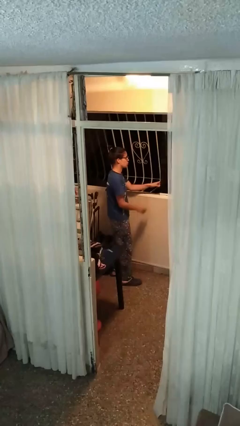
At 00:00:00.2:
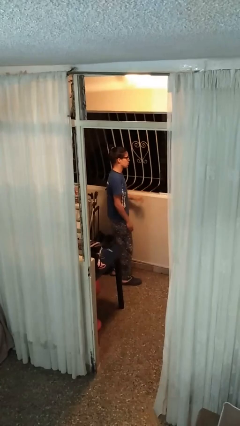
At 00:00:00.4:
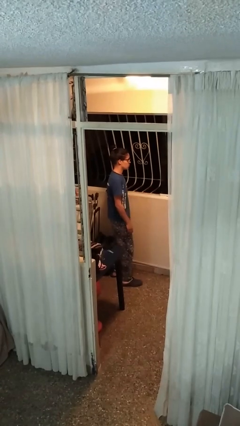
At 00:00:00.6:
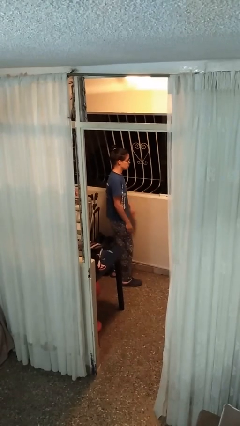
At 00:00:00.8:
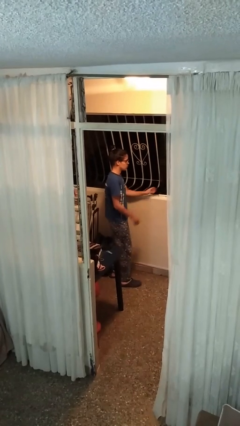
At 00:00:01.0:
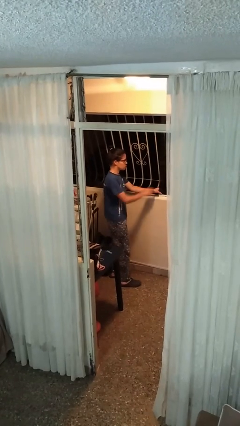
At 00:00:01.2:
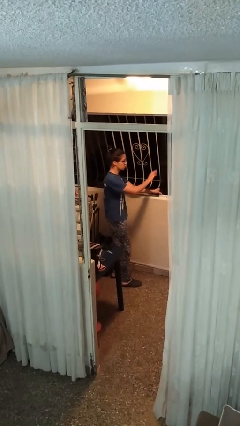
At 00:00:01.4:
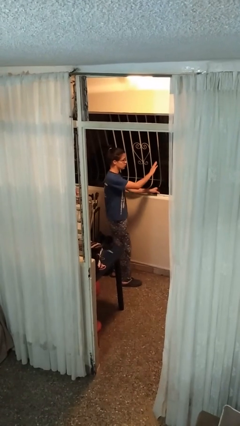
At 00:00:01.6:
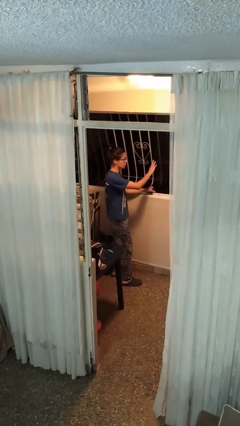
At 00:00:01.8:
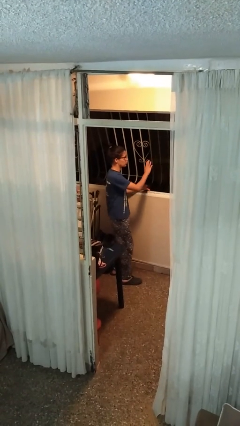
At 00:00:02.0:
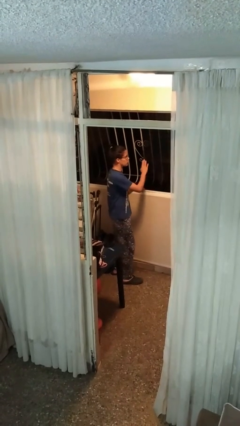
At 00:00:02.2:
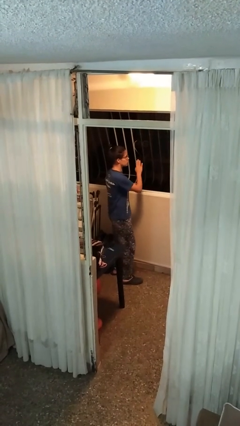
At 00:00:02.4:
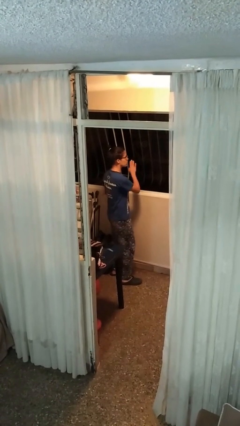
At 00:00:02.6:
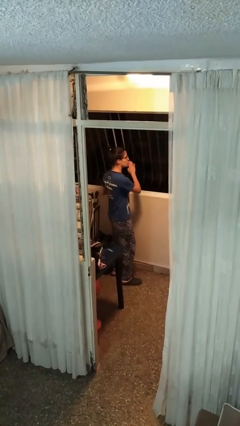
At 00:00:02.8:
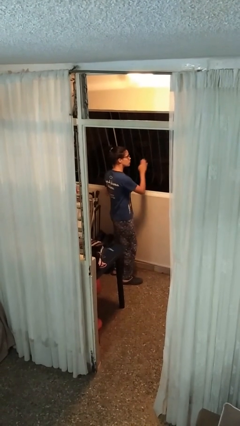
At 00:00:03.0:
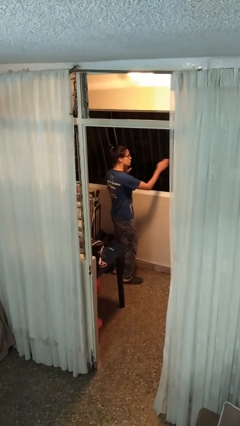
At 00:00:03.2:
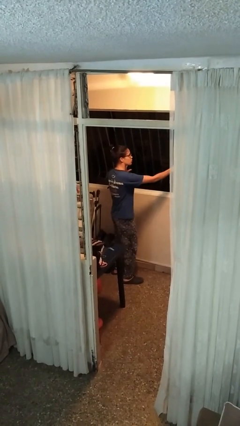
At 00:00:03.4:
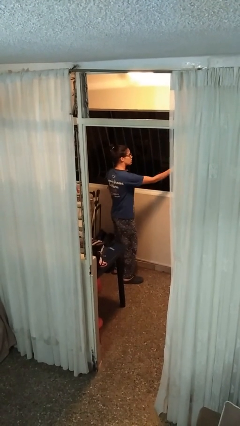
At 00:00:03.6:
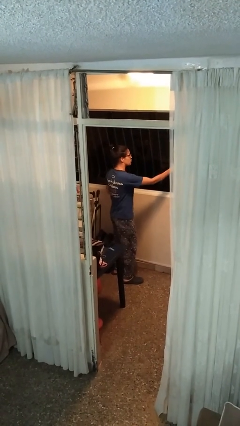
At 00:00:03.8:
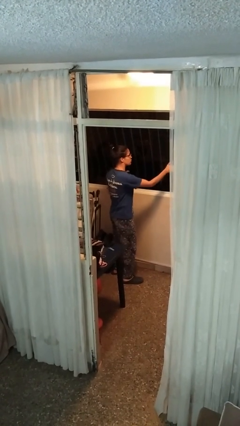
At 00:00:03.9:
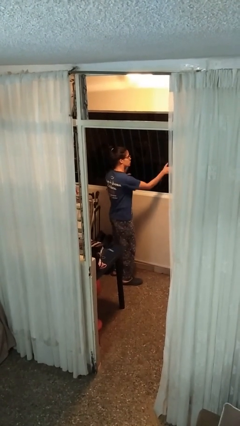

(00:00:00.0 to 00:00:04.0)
person closes home window

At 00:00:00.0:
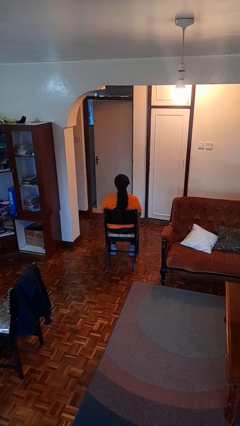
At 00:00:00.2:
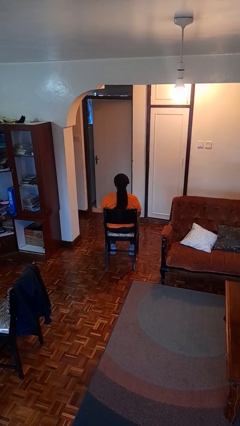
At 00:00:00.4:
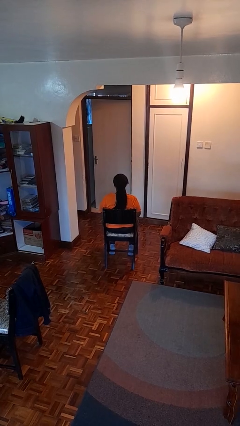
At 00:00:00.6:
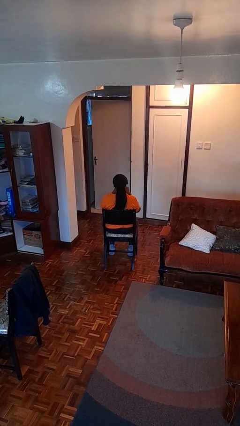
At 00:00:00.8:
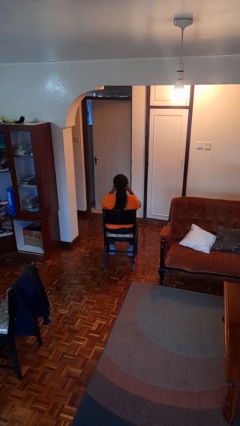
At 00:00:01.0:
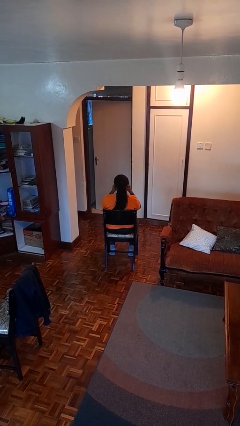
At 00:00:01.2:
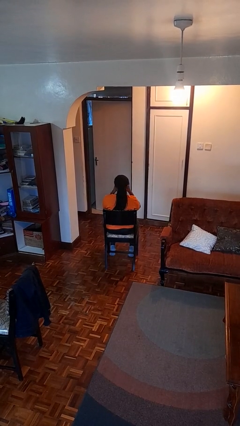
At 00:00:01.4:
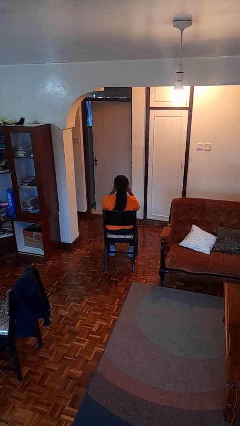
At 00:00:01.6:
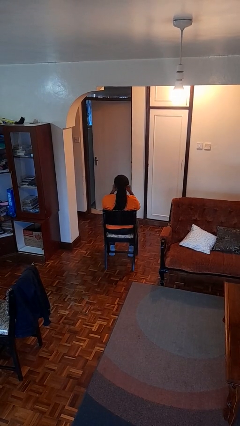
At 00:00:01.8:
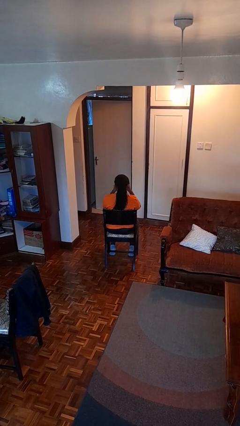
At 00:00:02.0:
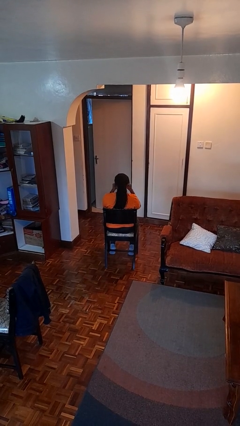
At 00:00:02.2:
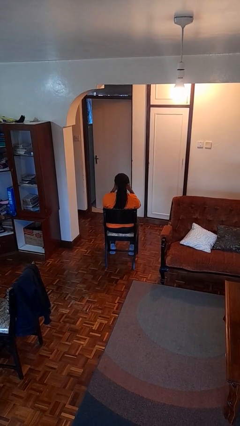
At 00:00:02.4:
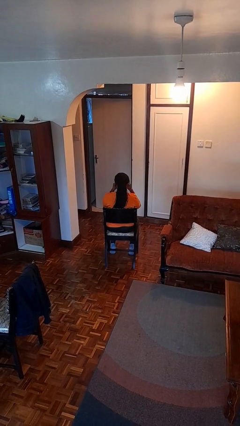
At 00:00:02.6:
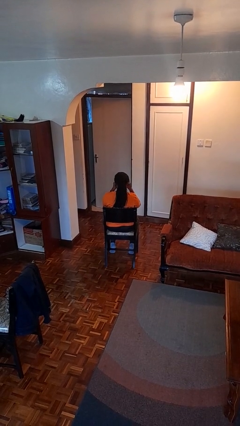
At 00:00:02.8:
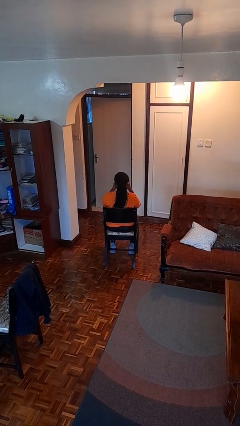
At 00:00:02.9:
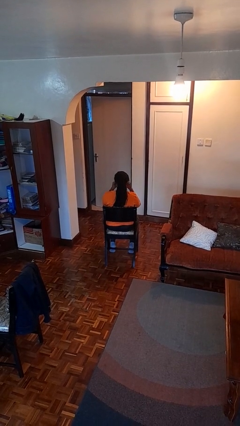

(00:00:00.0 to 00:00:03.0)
person rubs eyes

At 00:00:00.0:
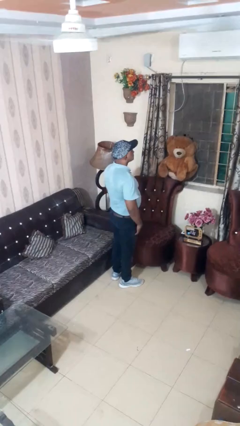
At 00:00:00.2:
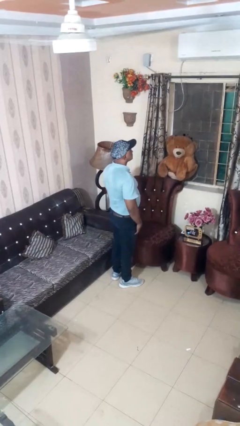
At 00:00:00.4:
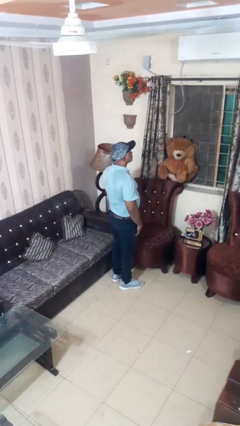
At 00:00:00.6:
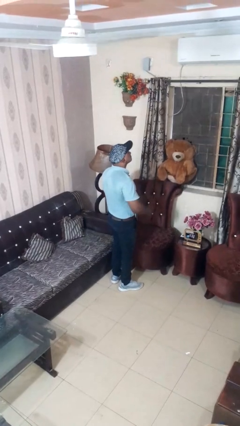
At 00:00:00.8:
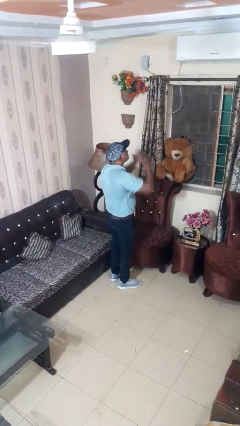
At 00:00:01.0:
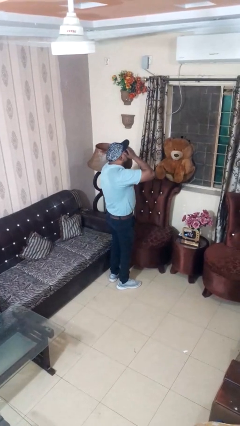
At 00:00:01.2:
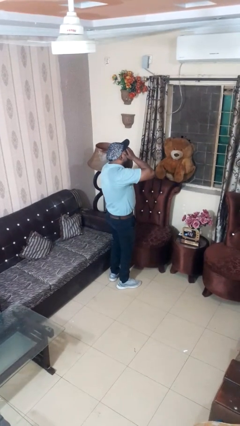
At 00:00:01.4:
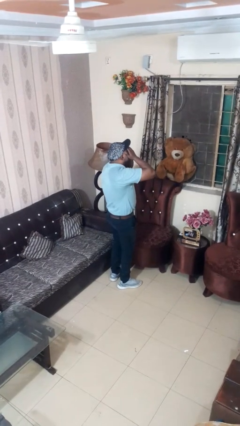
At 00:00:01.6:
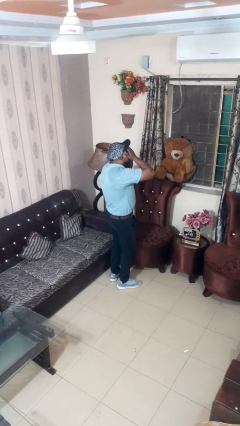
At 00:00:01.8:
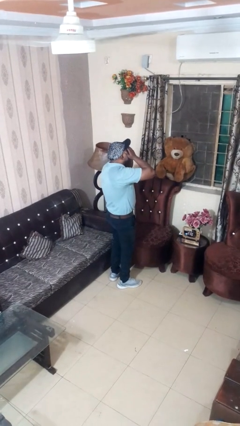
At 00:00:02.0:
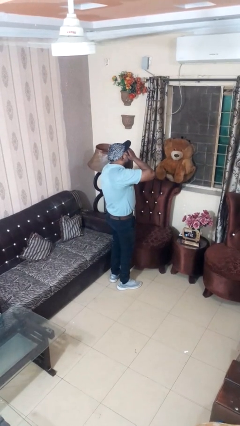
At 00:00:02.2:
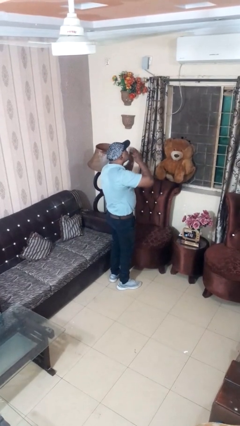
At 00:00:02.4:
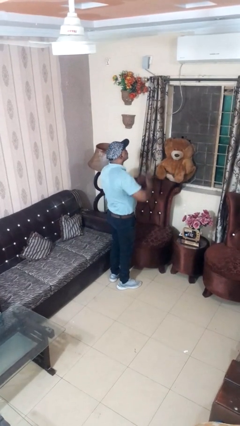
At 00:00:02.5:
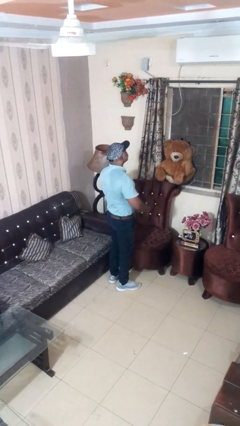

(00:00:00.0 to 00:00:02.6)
person covers face with hands

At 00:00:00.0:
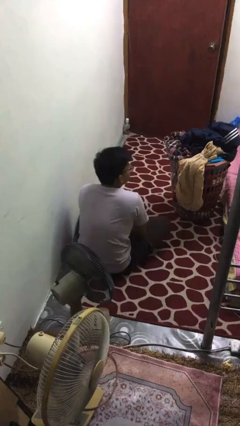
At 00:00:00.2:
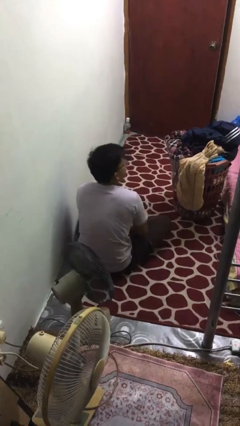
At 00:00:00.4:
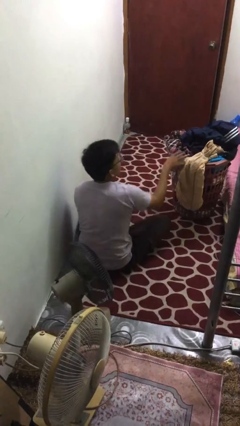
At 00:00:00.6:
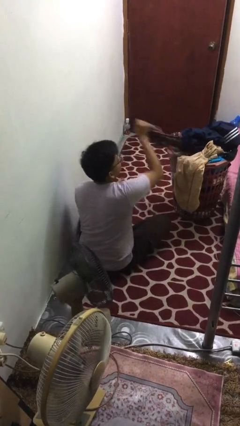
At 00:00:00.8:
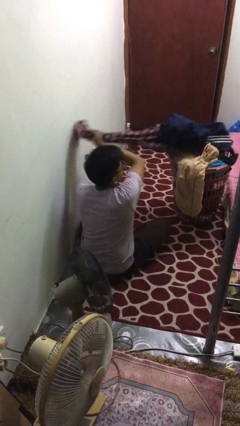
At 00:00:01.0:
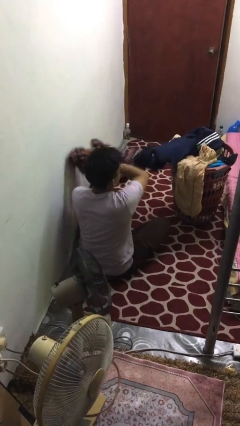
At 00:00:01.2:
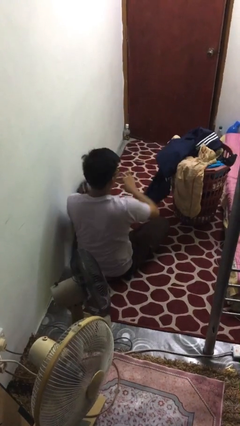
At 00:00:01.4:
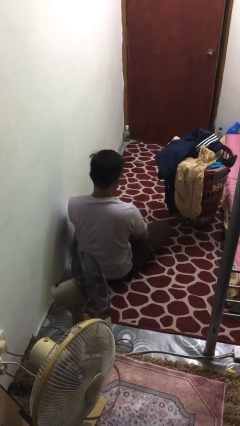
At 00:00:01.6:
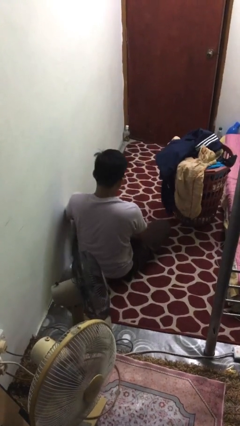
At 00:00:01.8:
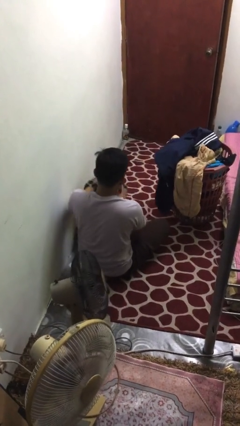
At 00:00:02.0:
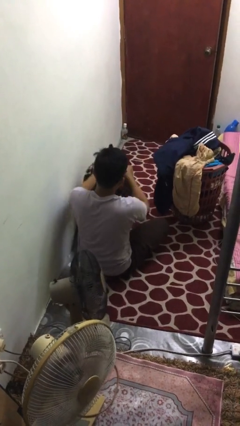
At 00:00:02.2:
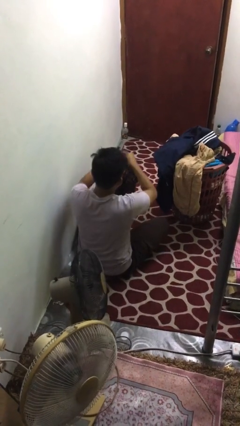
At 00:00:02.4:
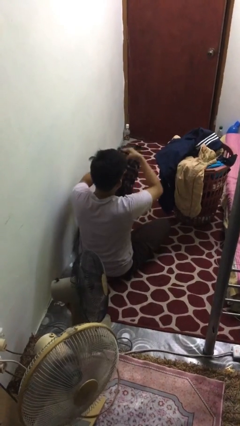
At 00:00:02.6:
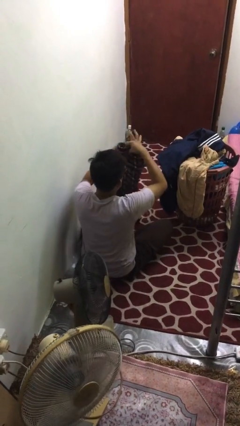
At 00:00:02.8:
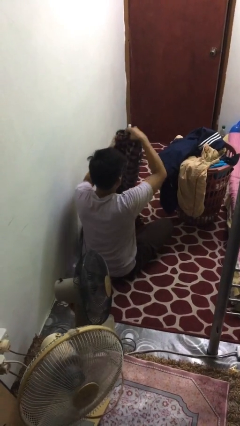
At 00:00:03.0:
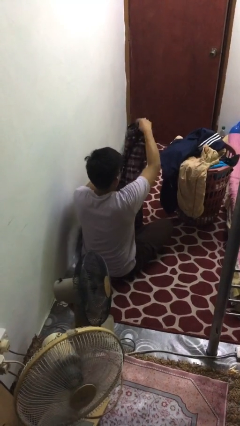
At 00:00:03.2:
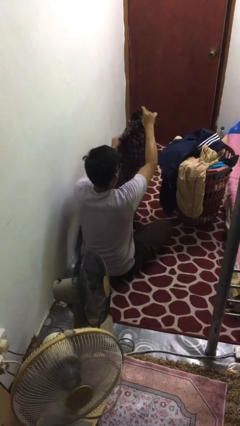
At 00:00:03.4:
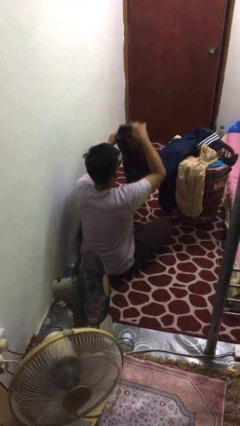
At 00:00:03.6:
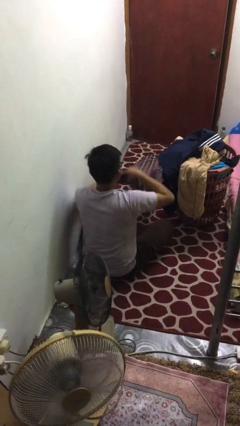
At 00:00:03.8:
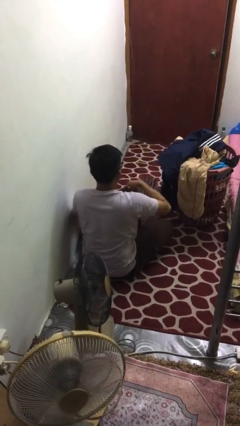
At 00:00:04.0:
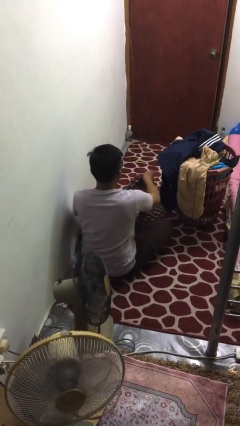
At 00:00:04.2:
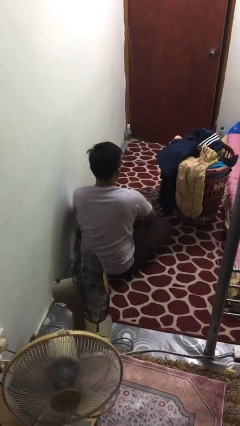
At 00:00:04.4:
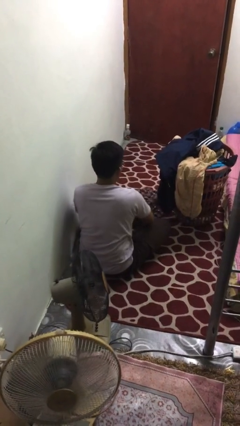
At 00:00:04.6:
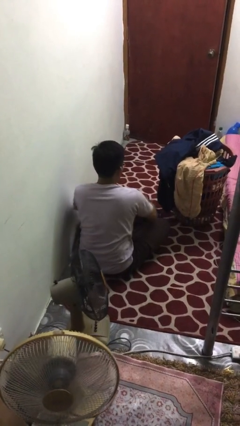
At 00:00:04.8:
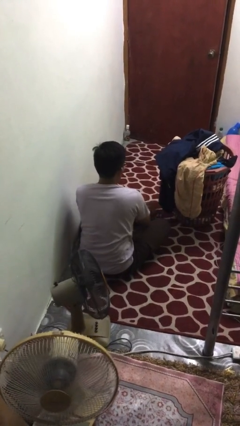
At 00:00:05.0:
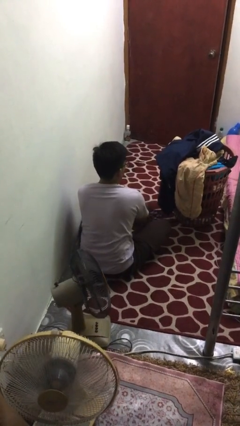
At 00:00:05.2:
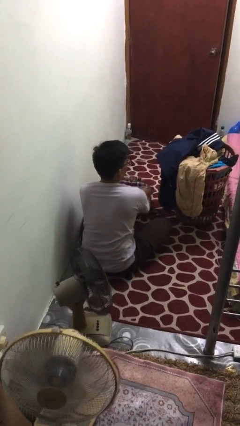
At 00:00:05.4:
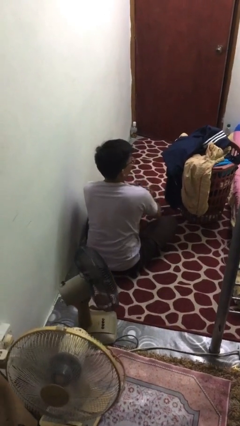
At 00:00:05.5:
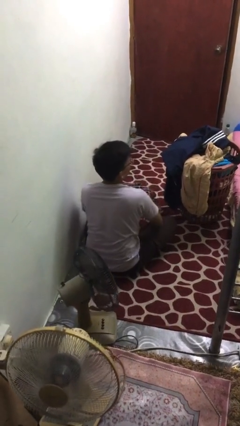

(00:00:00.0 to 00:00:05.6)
person folds pants

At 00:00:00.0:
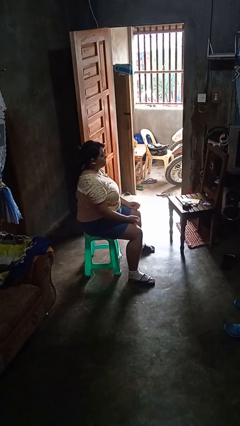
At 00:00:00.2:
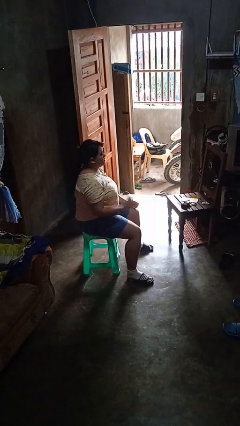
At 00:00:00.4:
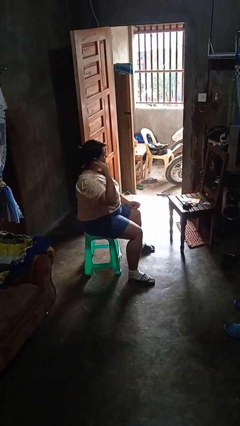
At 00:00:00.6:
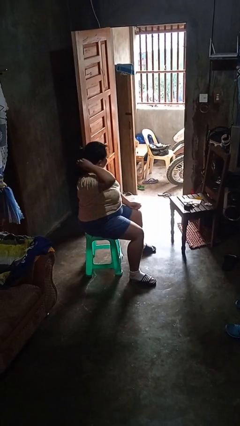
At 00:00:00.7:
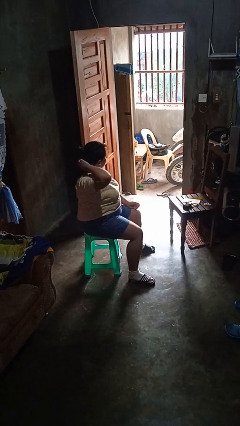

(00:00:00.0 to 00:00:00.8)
person takes off hairtie

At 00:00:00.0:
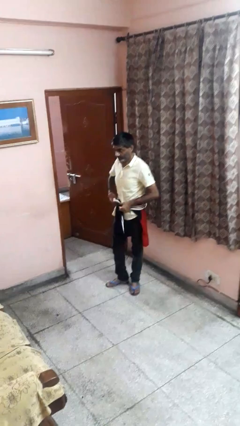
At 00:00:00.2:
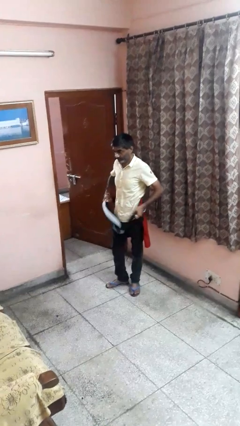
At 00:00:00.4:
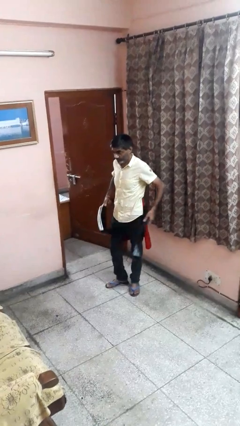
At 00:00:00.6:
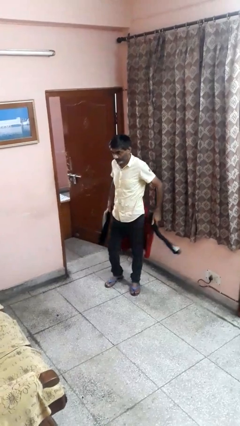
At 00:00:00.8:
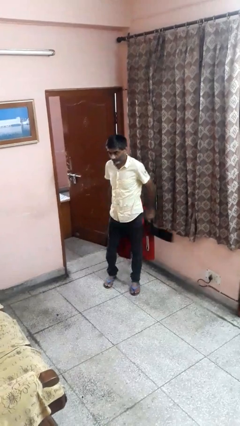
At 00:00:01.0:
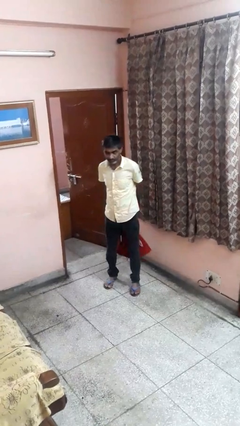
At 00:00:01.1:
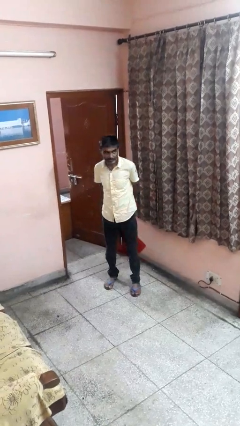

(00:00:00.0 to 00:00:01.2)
person unties jacket around waist
